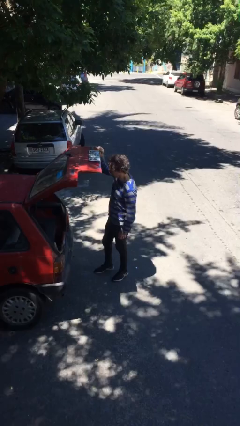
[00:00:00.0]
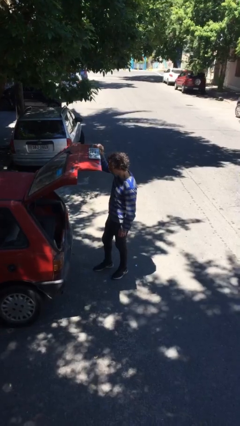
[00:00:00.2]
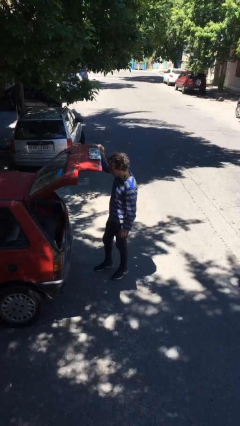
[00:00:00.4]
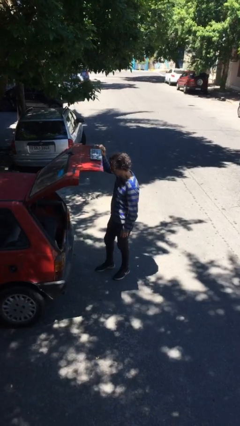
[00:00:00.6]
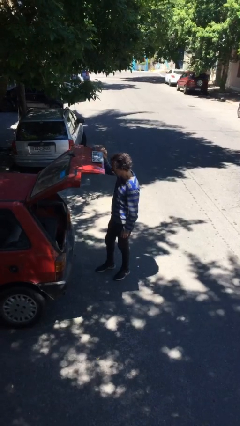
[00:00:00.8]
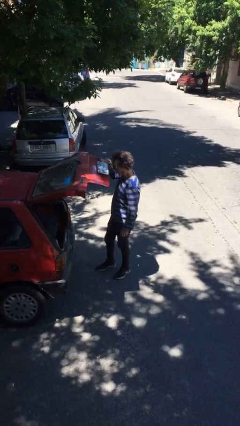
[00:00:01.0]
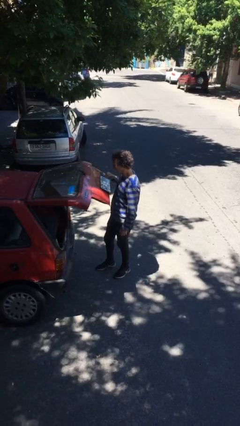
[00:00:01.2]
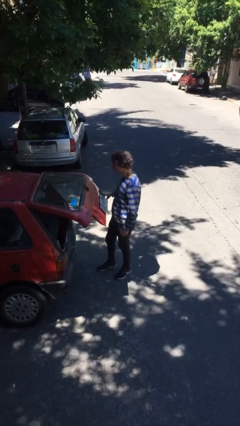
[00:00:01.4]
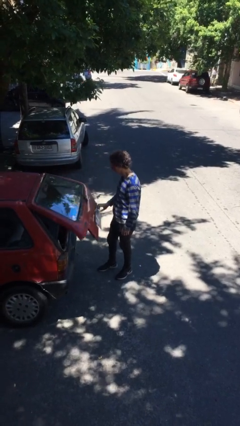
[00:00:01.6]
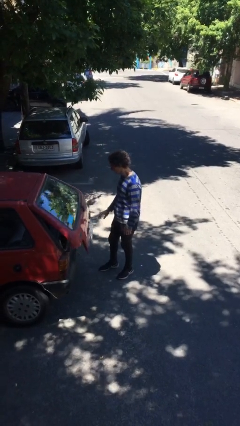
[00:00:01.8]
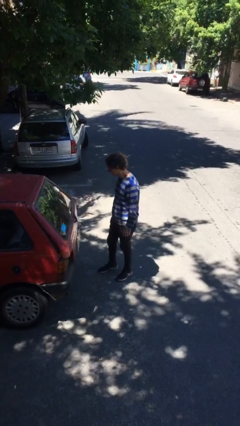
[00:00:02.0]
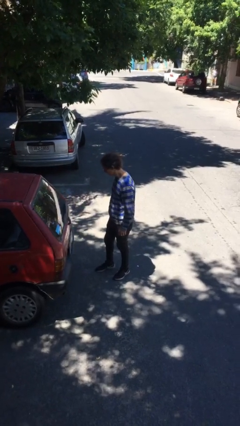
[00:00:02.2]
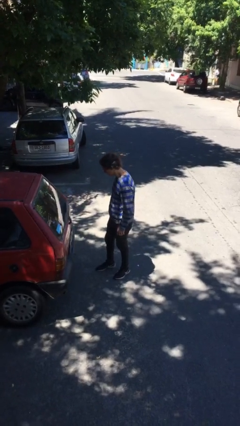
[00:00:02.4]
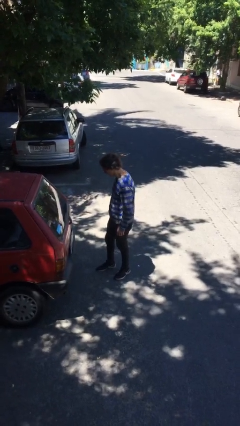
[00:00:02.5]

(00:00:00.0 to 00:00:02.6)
person closes car trunk

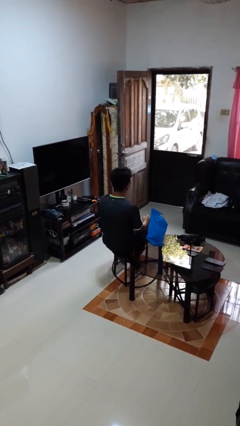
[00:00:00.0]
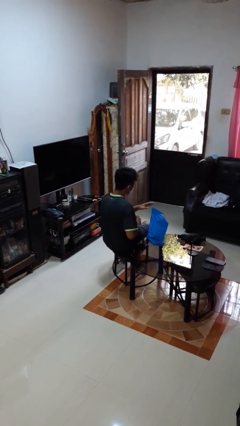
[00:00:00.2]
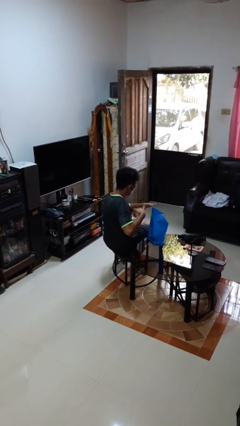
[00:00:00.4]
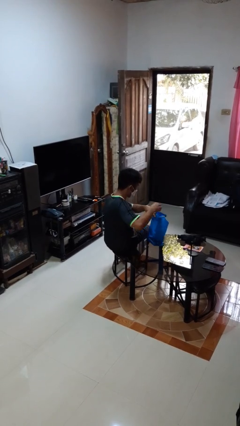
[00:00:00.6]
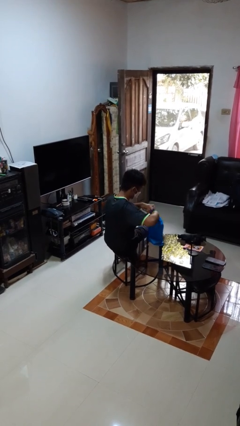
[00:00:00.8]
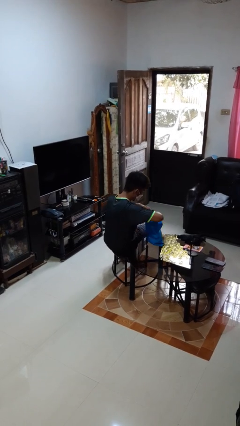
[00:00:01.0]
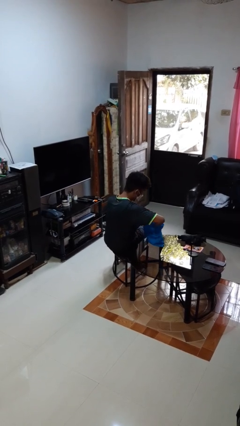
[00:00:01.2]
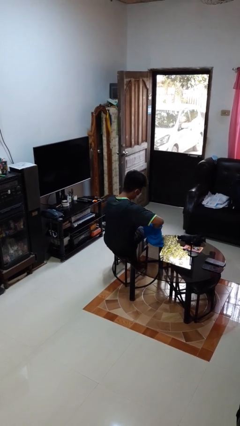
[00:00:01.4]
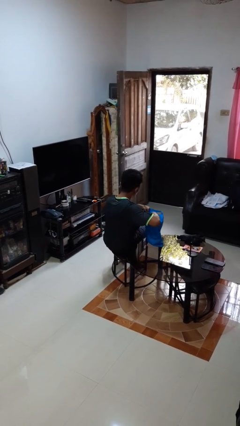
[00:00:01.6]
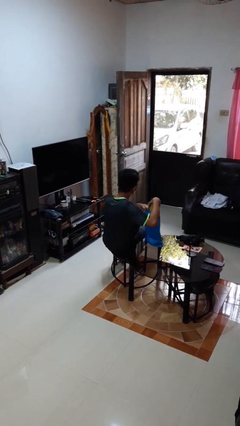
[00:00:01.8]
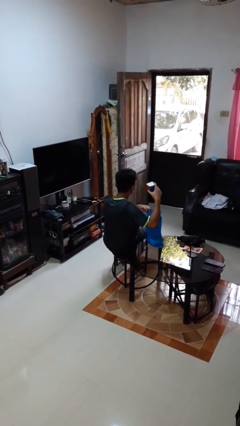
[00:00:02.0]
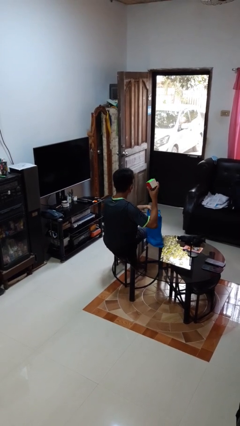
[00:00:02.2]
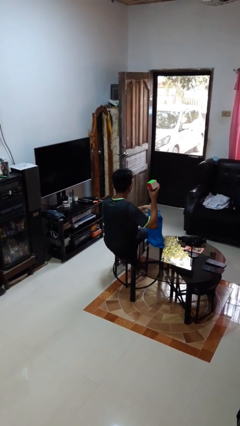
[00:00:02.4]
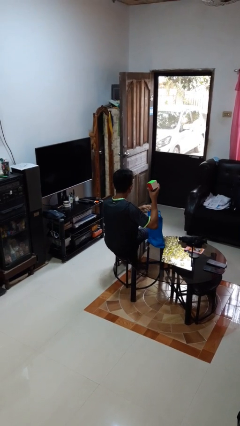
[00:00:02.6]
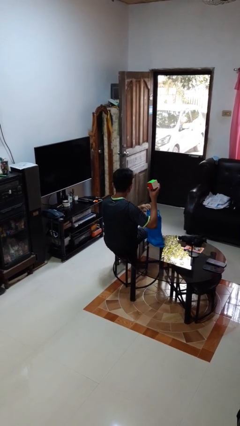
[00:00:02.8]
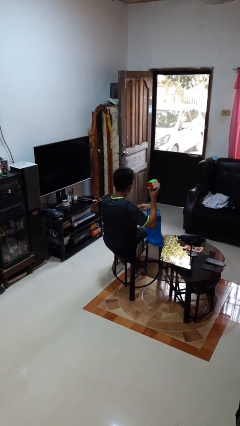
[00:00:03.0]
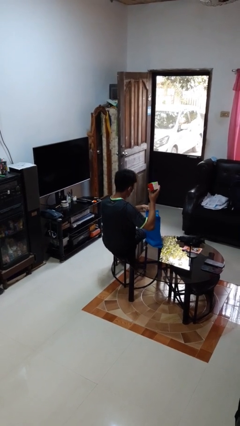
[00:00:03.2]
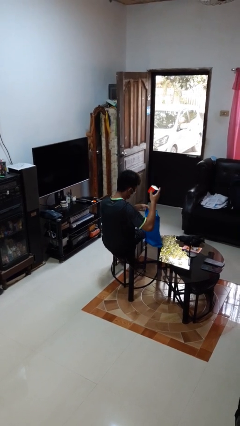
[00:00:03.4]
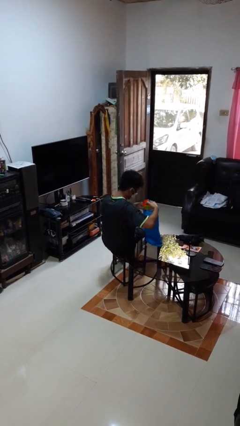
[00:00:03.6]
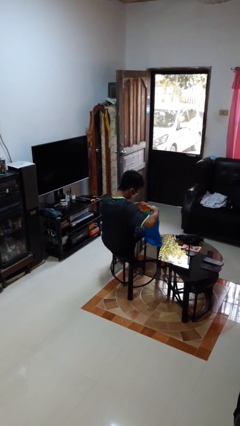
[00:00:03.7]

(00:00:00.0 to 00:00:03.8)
person takes object from bag

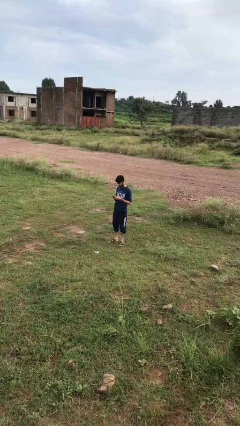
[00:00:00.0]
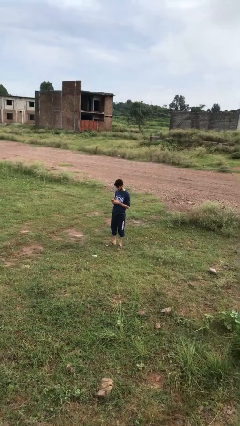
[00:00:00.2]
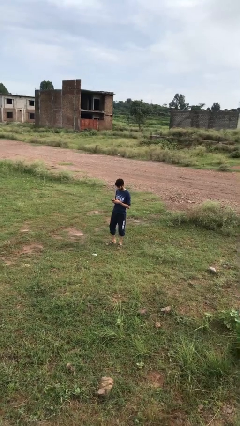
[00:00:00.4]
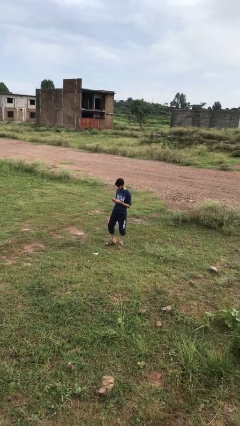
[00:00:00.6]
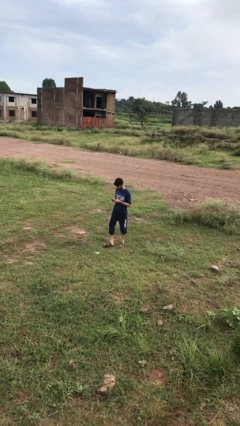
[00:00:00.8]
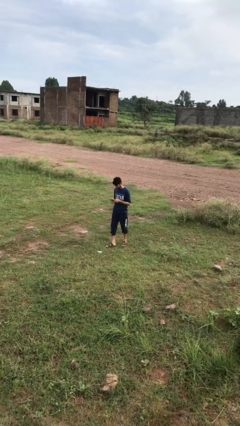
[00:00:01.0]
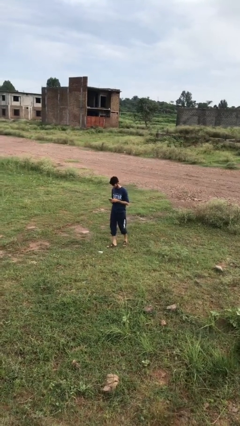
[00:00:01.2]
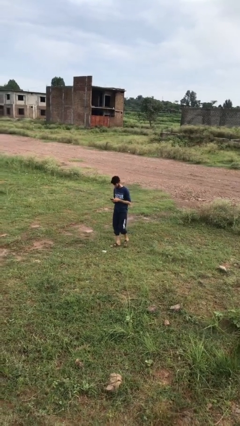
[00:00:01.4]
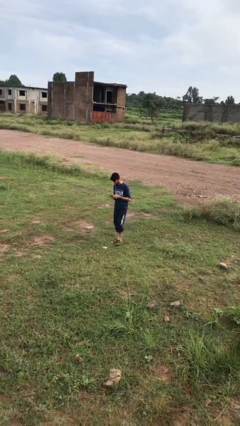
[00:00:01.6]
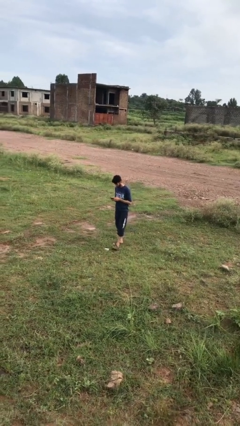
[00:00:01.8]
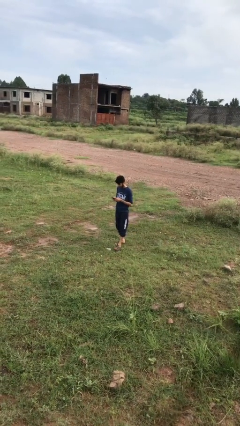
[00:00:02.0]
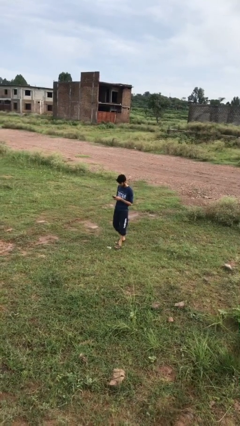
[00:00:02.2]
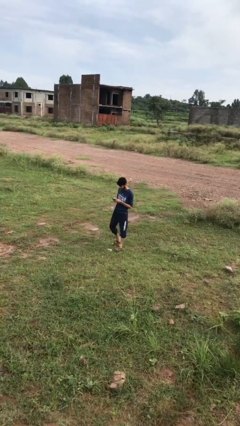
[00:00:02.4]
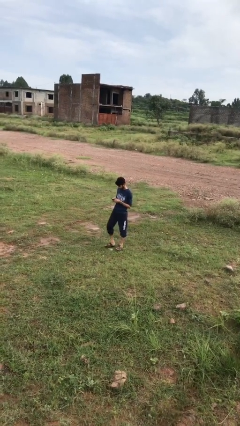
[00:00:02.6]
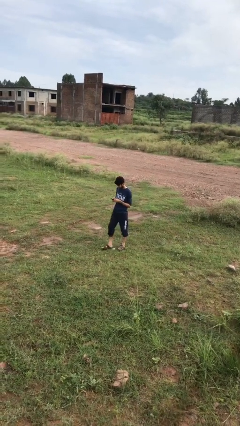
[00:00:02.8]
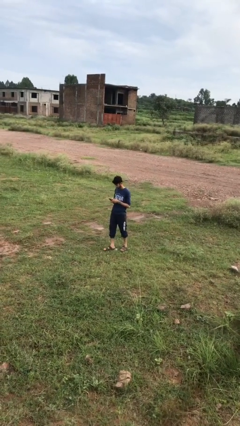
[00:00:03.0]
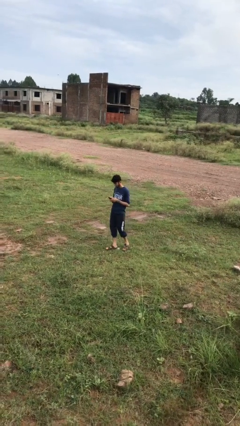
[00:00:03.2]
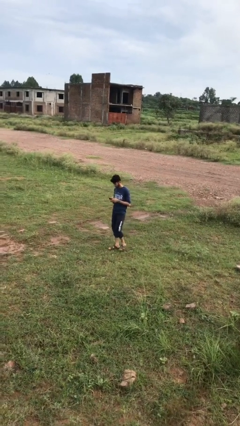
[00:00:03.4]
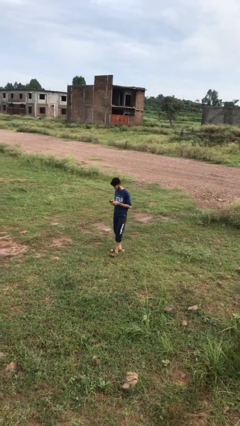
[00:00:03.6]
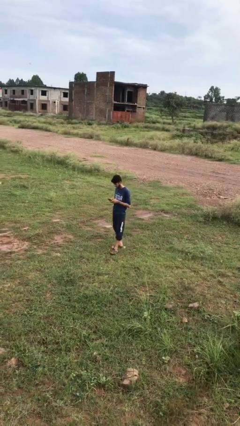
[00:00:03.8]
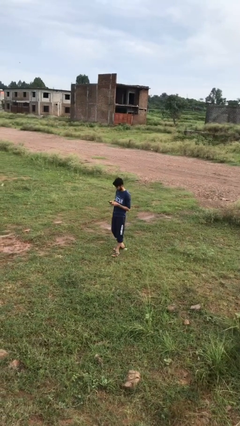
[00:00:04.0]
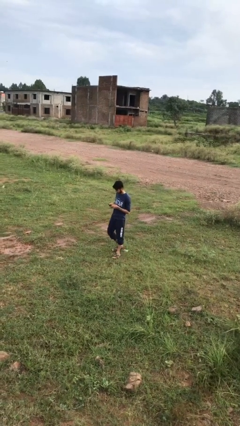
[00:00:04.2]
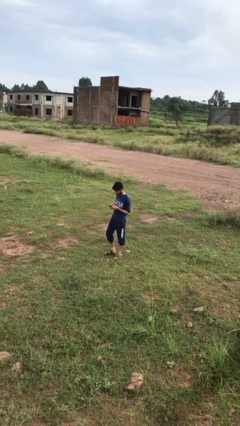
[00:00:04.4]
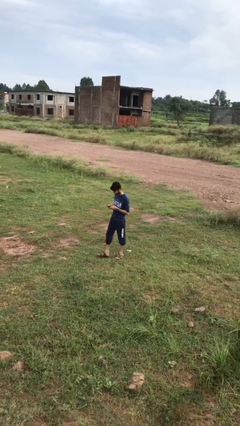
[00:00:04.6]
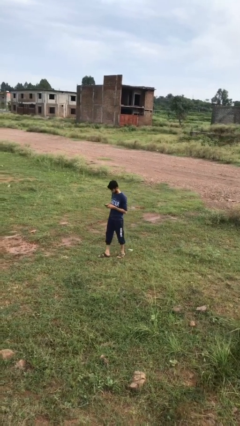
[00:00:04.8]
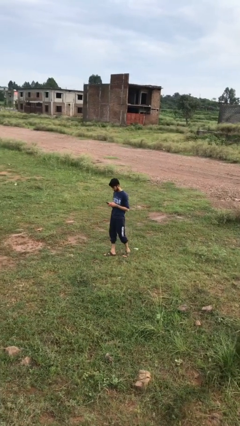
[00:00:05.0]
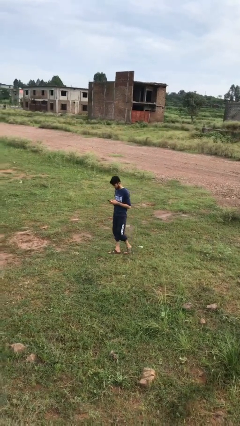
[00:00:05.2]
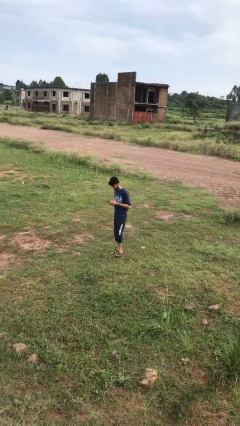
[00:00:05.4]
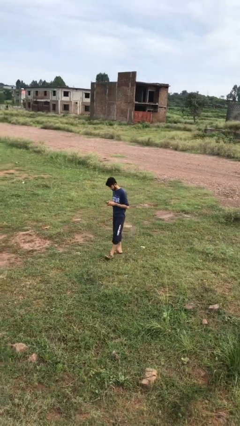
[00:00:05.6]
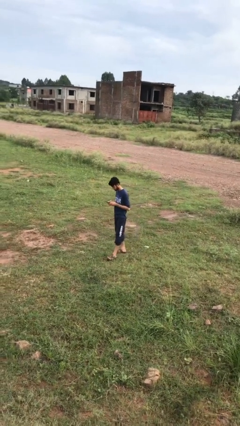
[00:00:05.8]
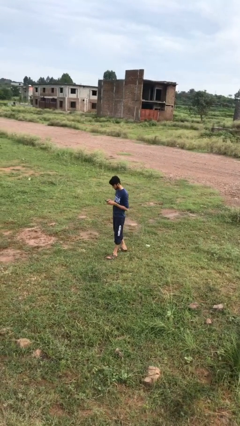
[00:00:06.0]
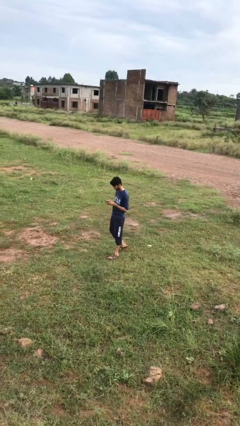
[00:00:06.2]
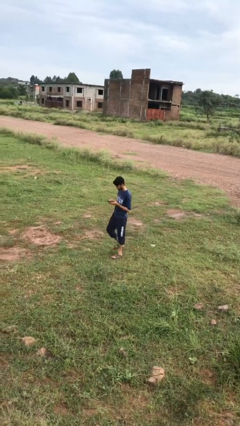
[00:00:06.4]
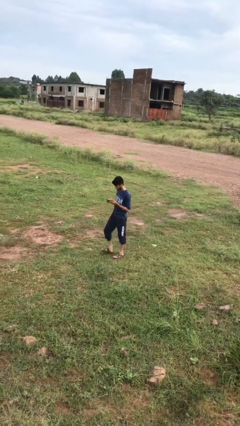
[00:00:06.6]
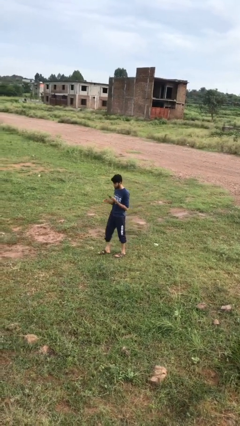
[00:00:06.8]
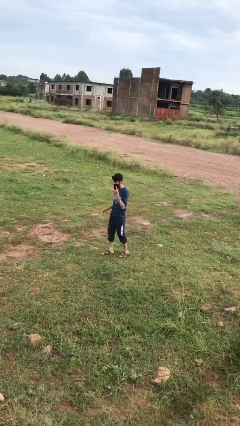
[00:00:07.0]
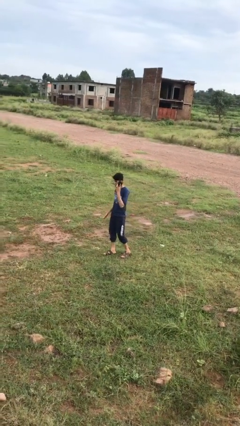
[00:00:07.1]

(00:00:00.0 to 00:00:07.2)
person texts on phone

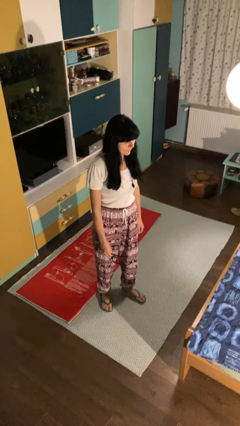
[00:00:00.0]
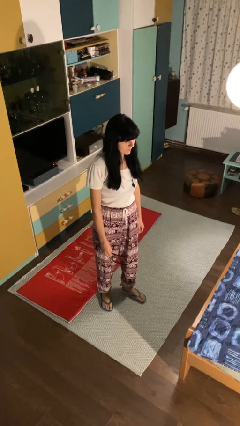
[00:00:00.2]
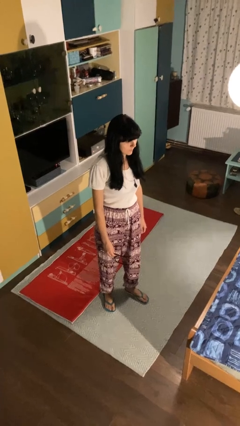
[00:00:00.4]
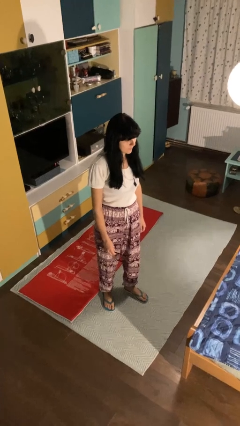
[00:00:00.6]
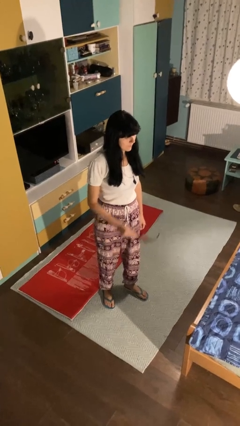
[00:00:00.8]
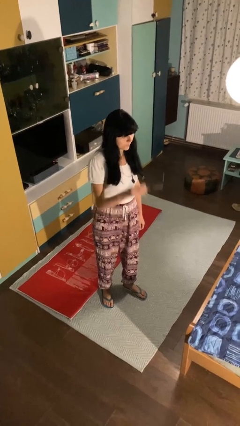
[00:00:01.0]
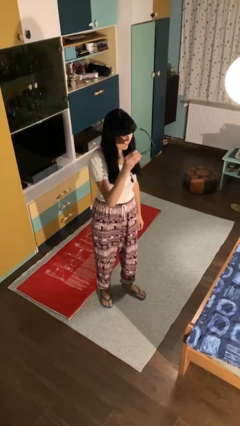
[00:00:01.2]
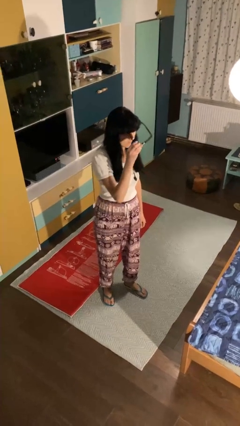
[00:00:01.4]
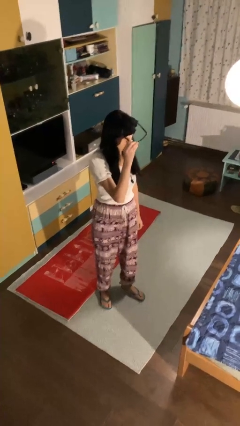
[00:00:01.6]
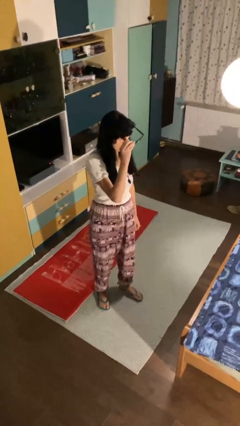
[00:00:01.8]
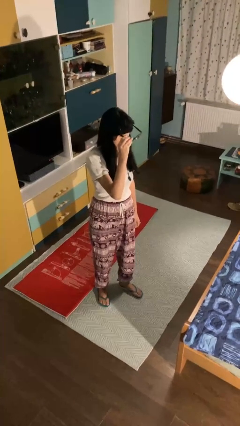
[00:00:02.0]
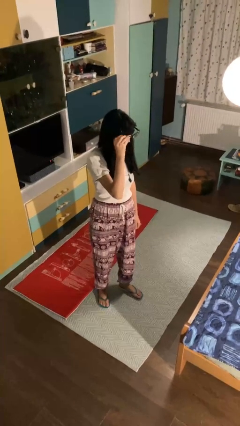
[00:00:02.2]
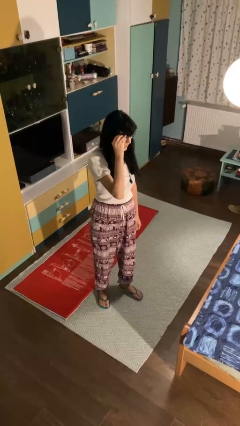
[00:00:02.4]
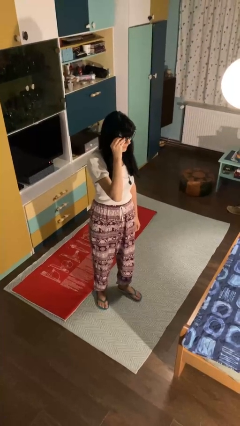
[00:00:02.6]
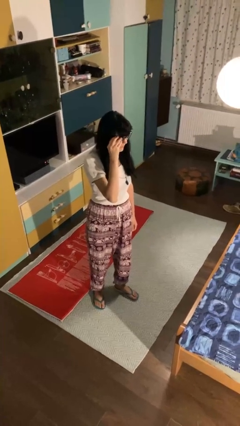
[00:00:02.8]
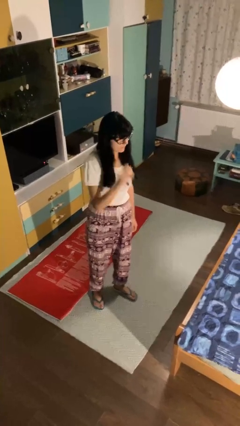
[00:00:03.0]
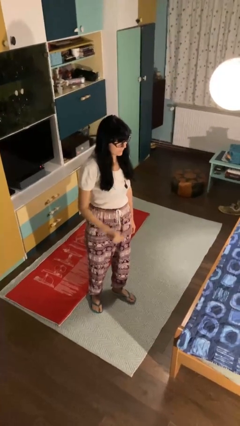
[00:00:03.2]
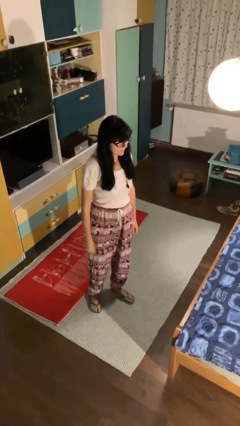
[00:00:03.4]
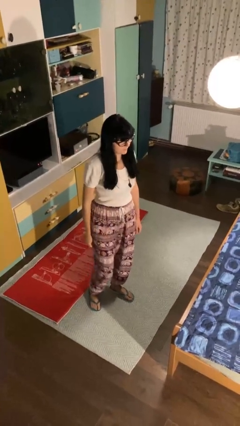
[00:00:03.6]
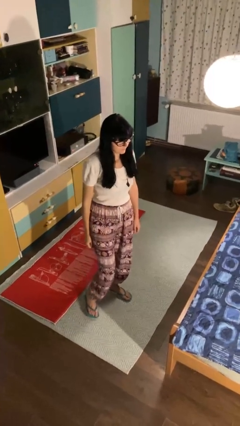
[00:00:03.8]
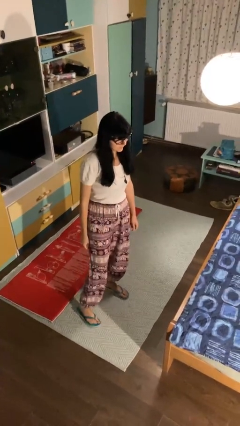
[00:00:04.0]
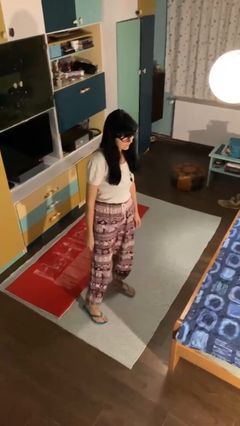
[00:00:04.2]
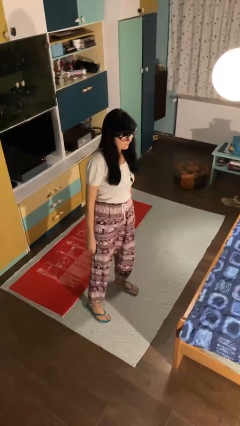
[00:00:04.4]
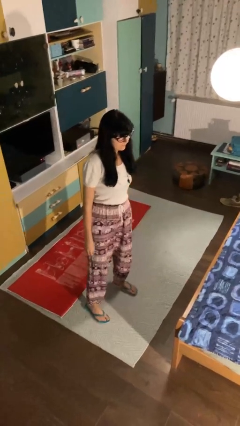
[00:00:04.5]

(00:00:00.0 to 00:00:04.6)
person puts on glasses
